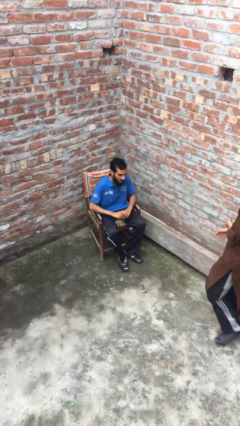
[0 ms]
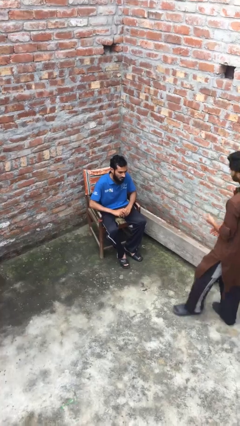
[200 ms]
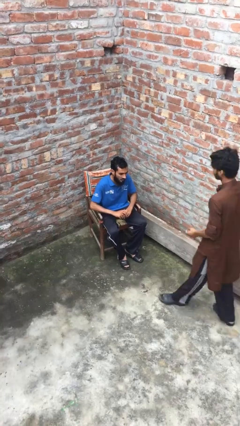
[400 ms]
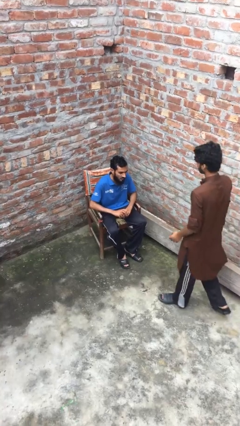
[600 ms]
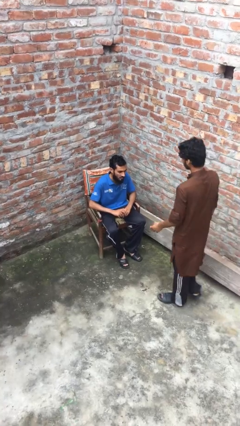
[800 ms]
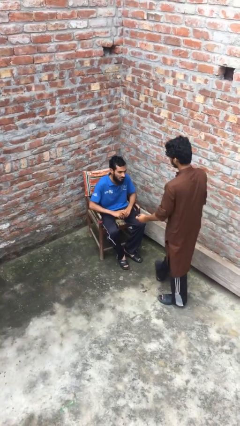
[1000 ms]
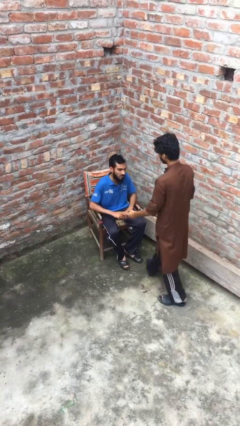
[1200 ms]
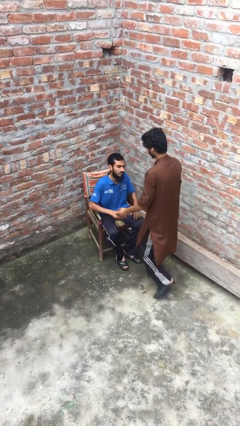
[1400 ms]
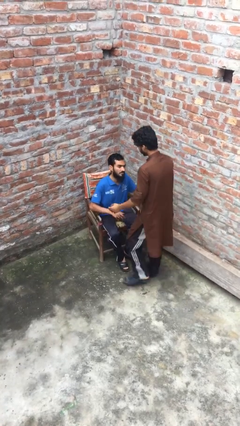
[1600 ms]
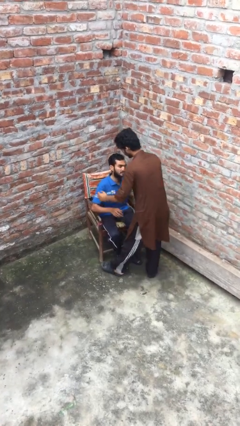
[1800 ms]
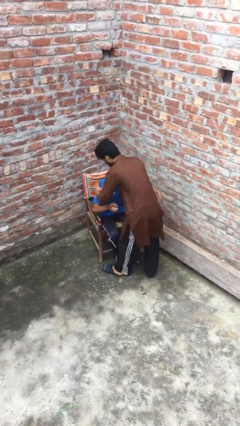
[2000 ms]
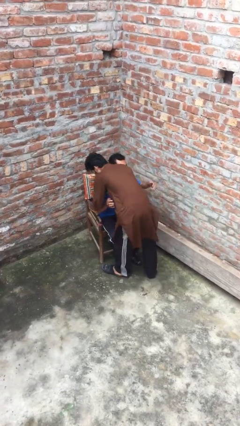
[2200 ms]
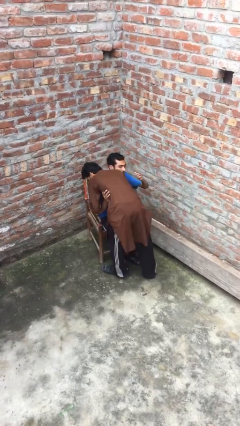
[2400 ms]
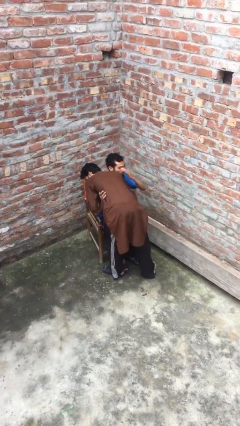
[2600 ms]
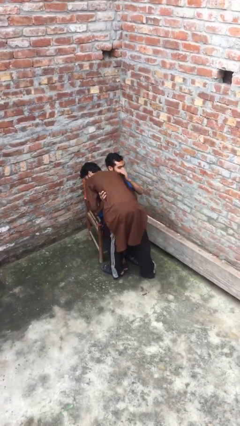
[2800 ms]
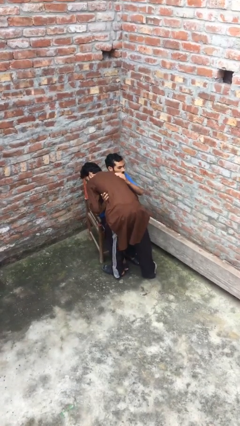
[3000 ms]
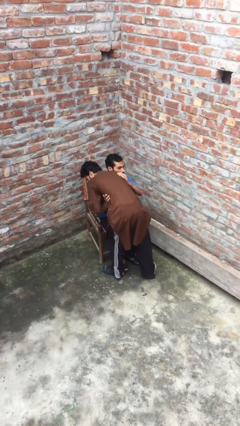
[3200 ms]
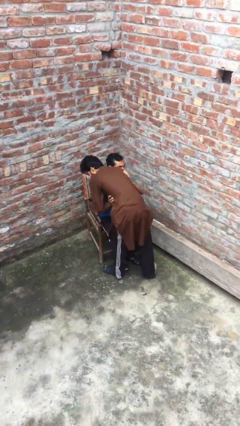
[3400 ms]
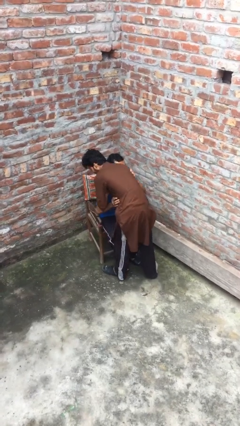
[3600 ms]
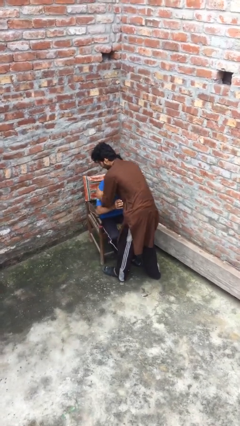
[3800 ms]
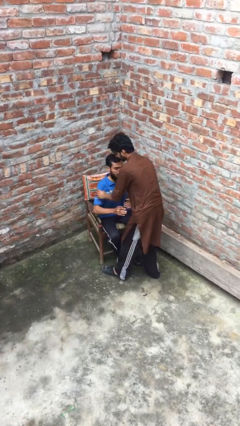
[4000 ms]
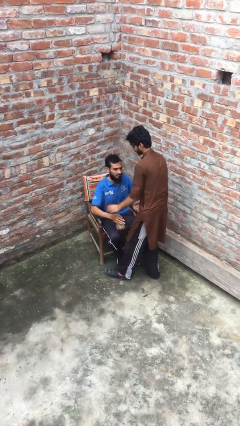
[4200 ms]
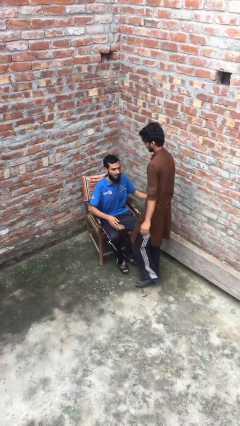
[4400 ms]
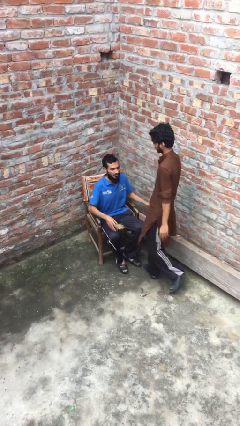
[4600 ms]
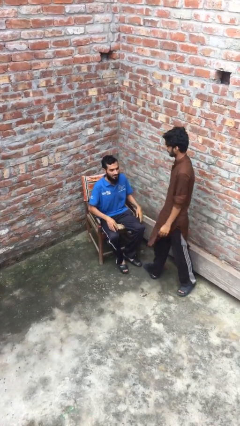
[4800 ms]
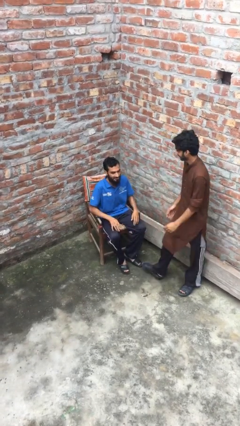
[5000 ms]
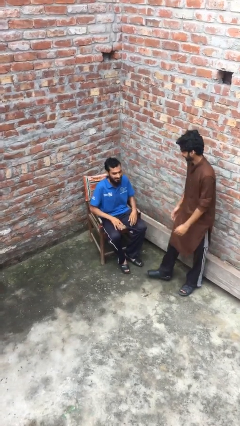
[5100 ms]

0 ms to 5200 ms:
person embraces person

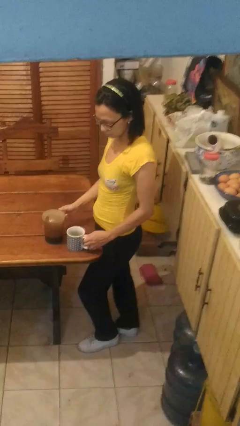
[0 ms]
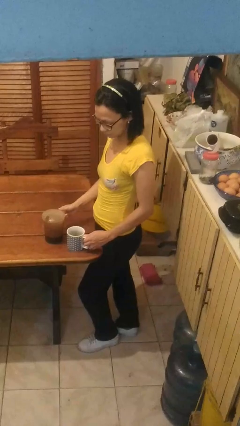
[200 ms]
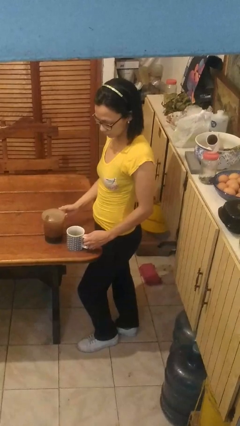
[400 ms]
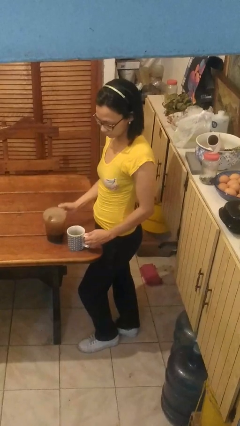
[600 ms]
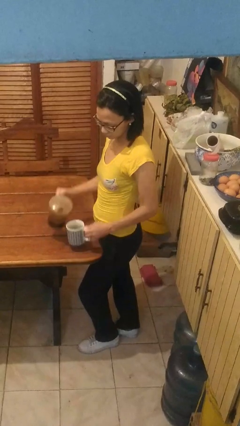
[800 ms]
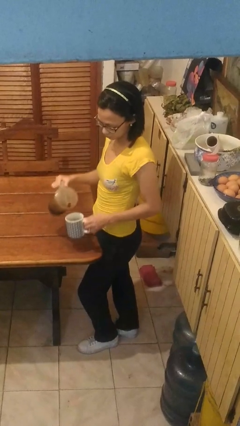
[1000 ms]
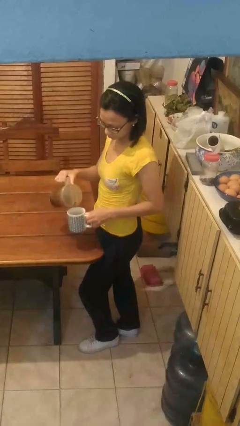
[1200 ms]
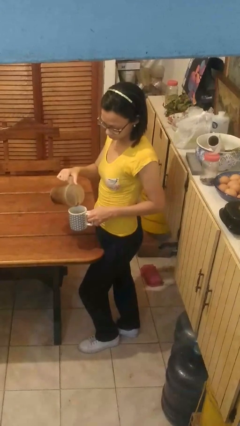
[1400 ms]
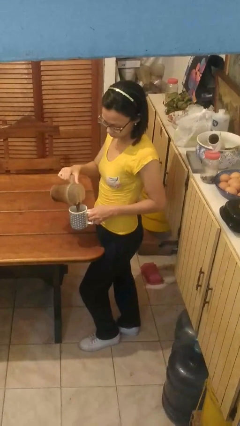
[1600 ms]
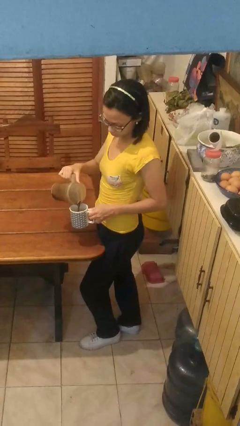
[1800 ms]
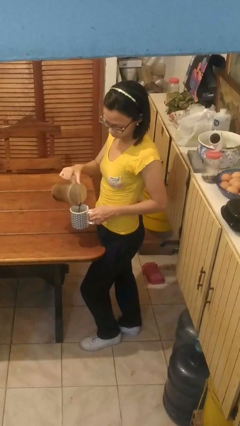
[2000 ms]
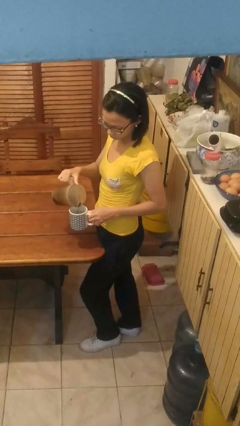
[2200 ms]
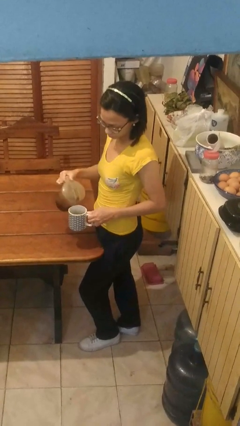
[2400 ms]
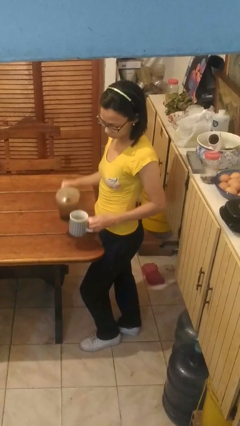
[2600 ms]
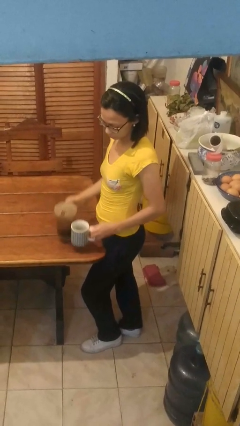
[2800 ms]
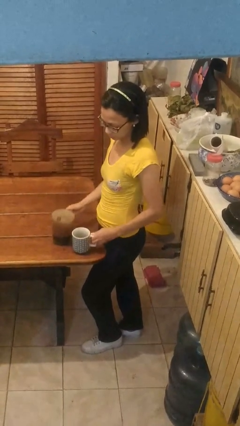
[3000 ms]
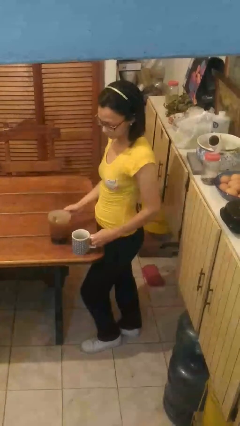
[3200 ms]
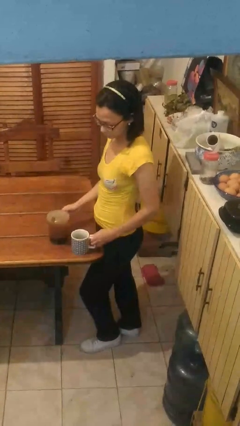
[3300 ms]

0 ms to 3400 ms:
person pours coffee into mug

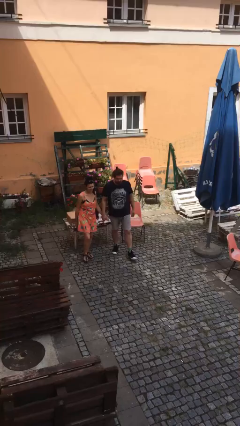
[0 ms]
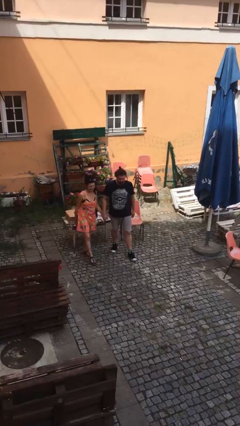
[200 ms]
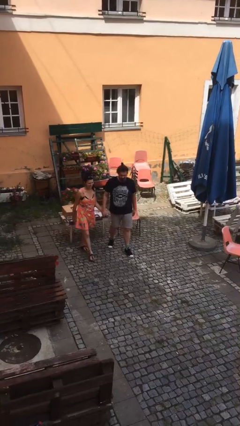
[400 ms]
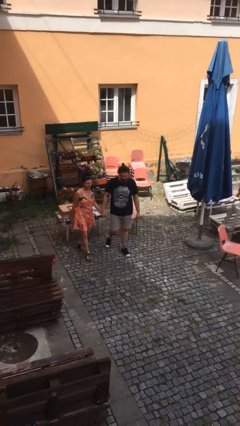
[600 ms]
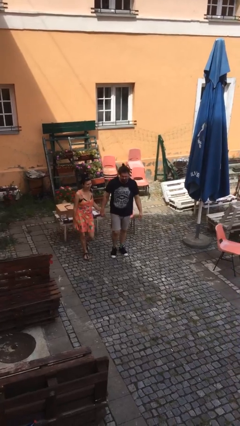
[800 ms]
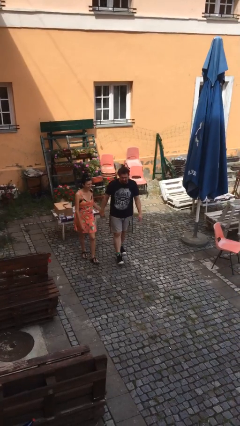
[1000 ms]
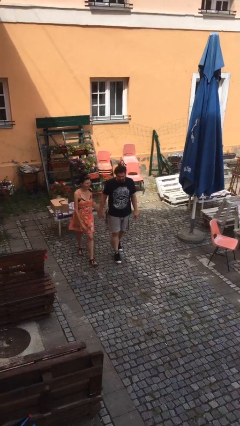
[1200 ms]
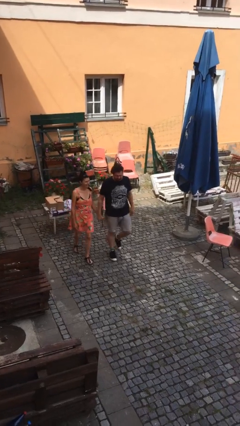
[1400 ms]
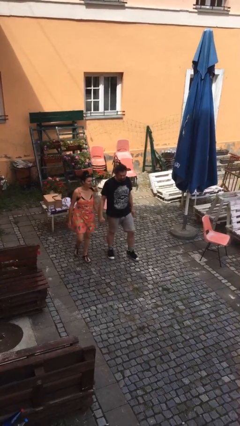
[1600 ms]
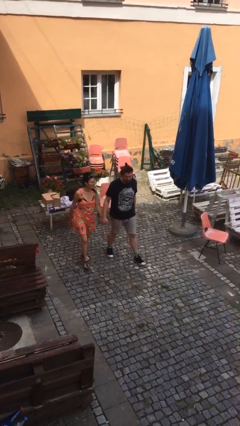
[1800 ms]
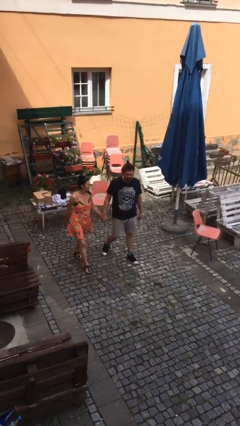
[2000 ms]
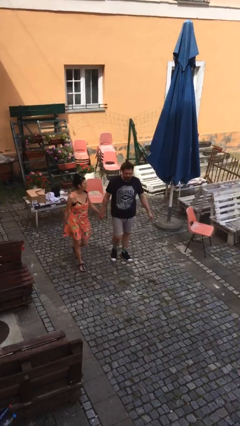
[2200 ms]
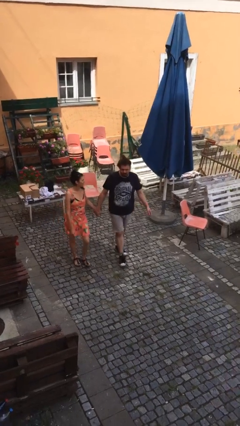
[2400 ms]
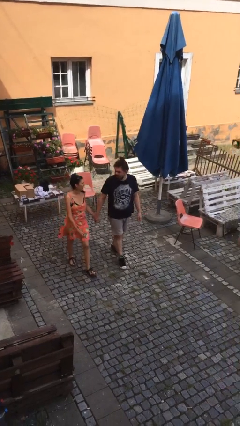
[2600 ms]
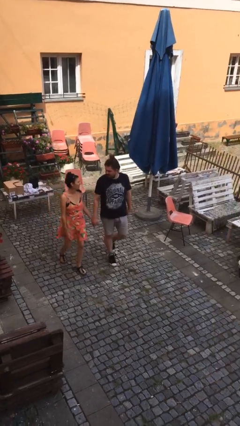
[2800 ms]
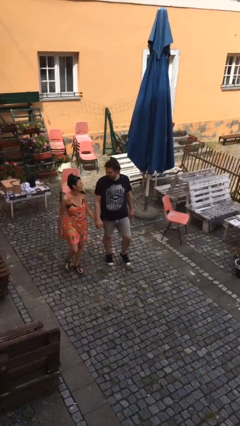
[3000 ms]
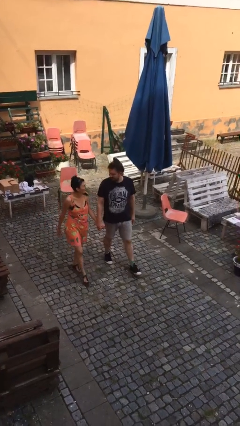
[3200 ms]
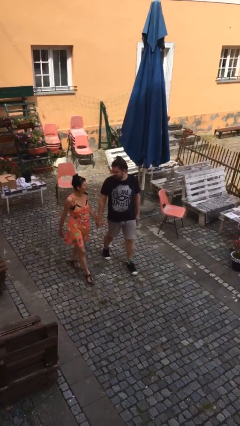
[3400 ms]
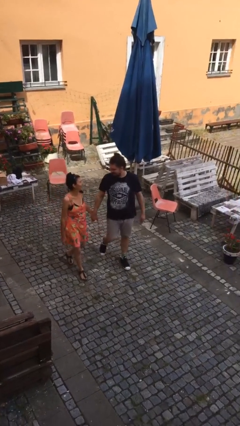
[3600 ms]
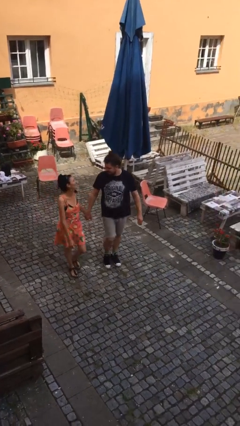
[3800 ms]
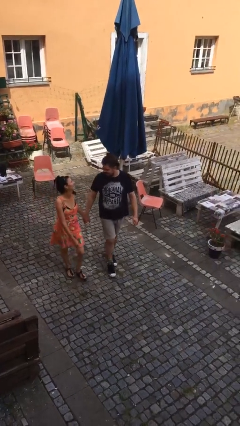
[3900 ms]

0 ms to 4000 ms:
person holds hand

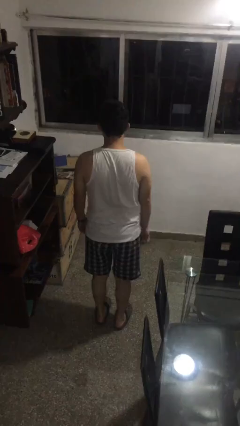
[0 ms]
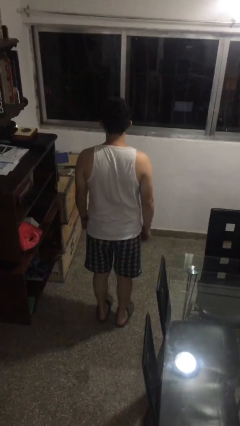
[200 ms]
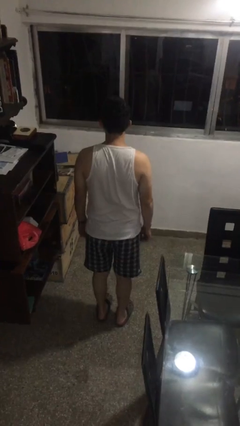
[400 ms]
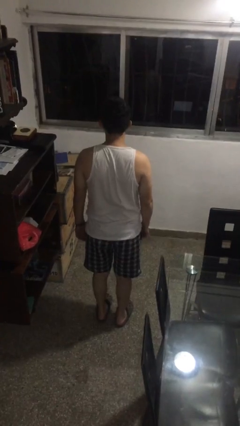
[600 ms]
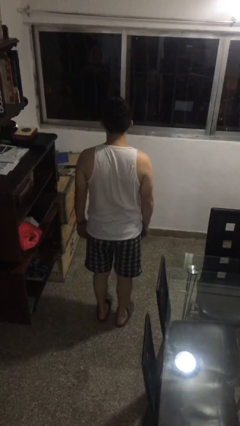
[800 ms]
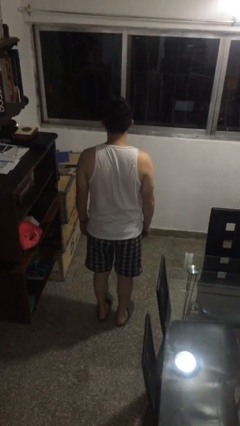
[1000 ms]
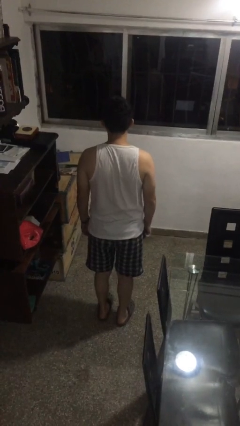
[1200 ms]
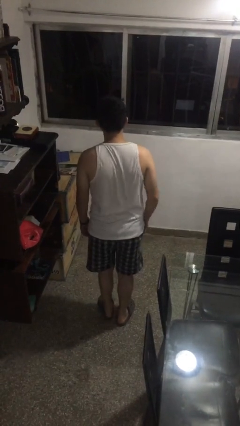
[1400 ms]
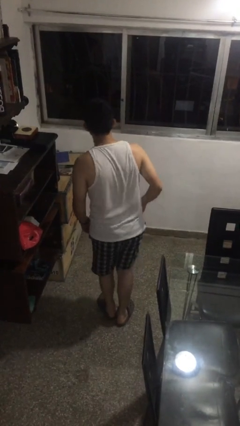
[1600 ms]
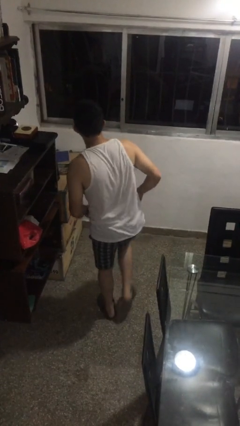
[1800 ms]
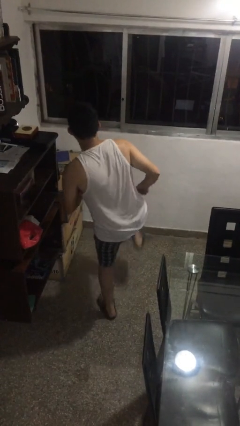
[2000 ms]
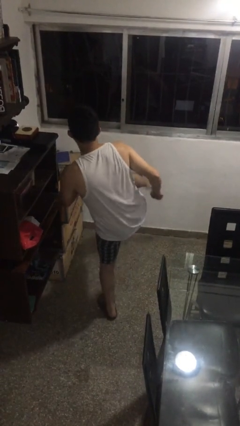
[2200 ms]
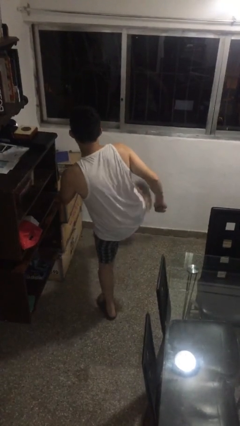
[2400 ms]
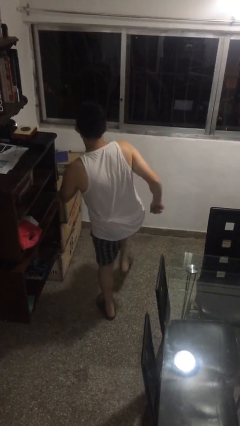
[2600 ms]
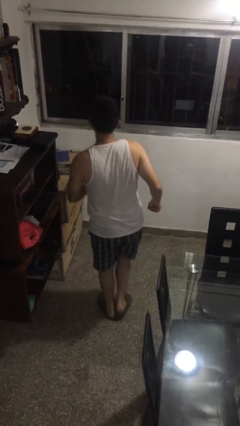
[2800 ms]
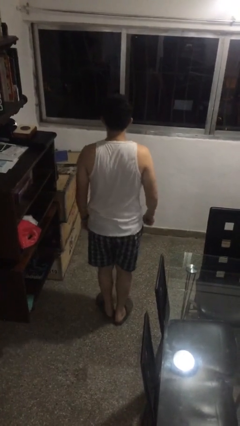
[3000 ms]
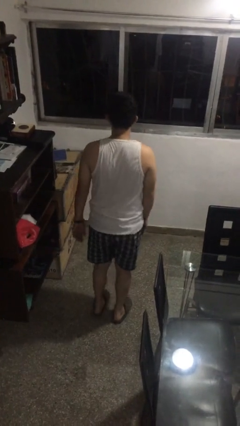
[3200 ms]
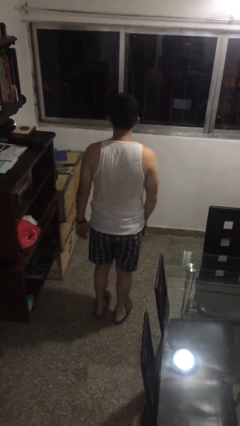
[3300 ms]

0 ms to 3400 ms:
person karate kicks

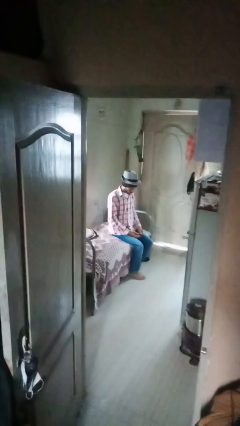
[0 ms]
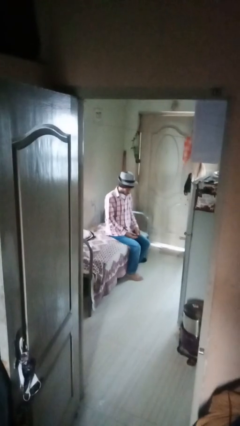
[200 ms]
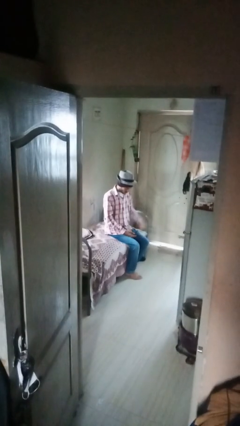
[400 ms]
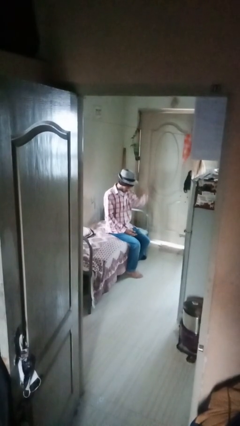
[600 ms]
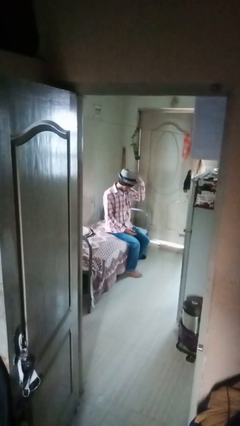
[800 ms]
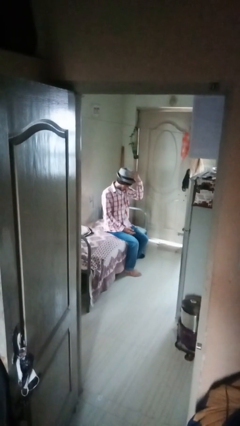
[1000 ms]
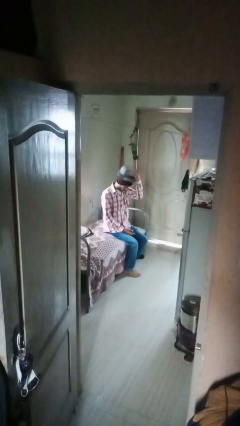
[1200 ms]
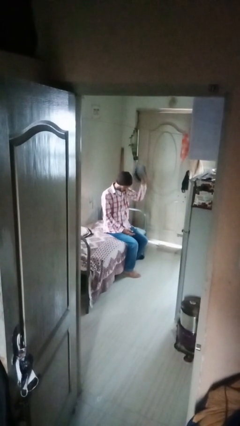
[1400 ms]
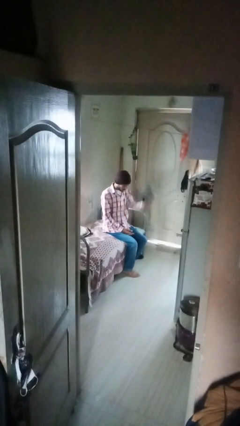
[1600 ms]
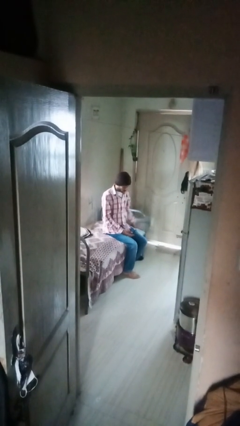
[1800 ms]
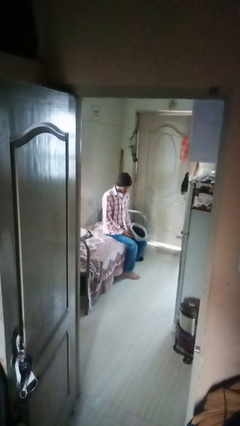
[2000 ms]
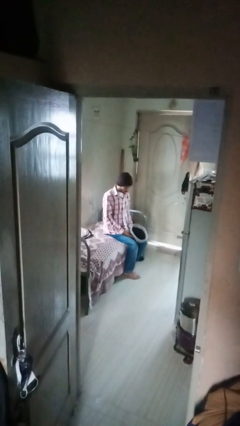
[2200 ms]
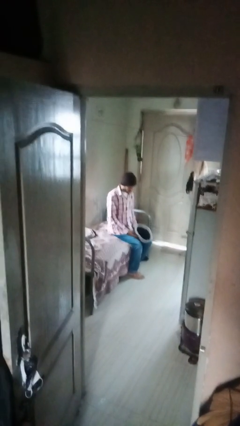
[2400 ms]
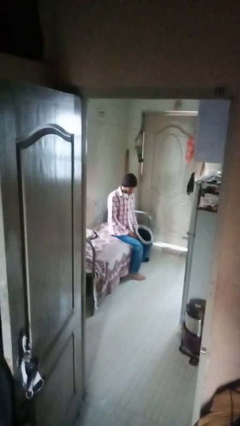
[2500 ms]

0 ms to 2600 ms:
person takes off hat
